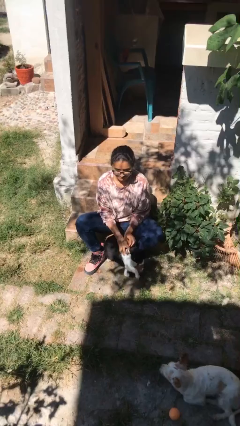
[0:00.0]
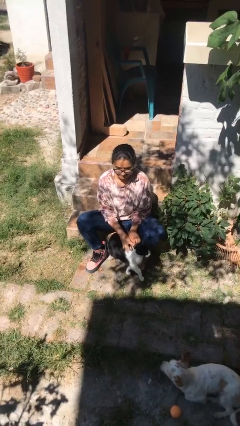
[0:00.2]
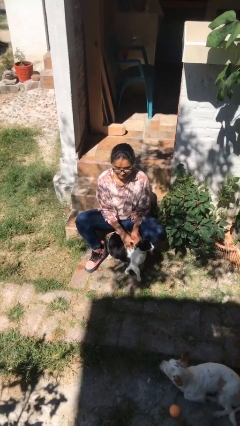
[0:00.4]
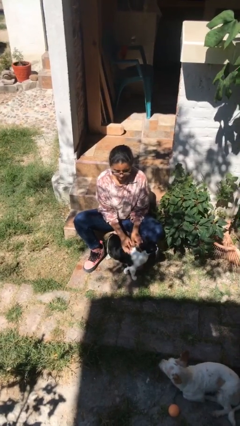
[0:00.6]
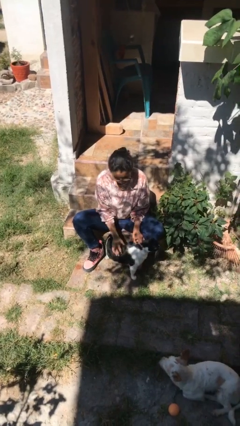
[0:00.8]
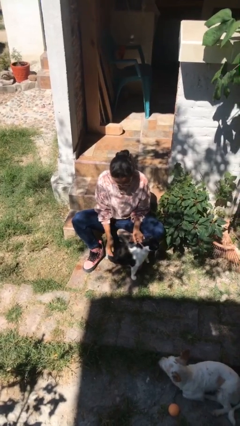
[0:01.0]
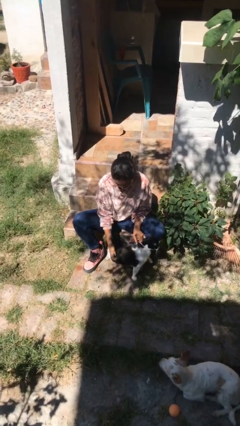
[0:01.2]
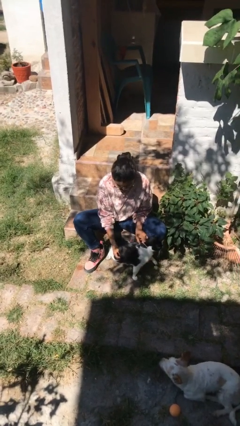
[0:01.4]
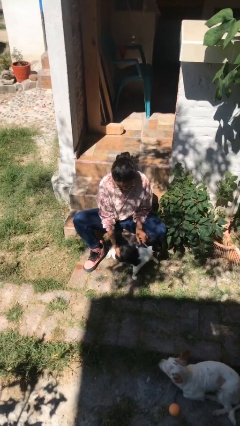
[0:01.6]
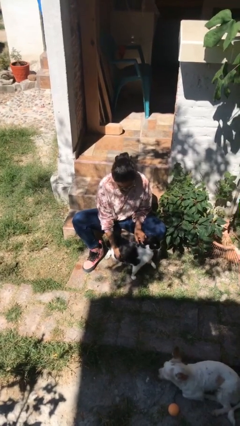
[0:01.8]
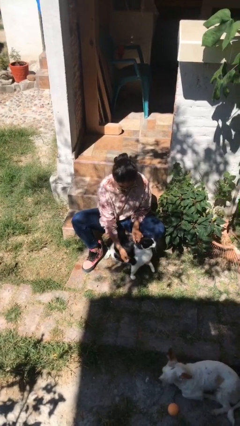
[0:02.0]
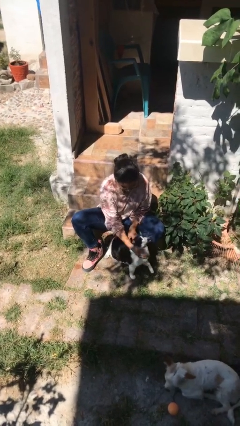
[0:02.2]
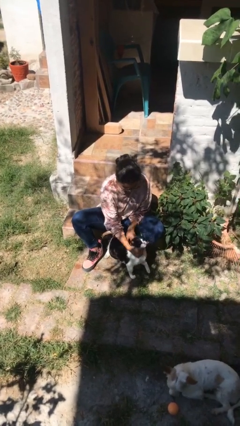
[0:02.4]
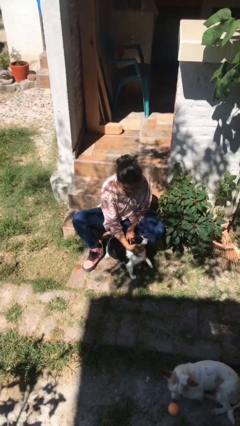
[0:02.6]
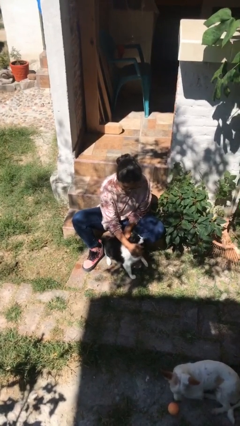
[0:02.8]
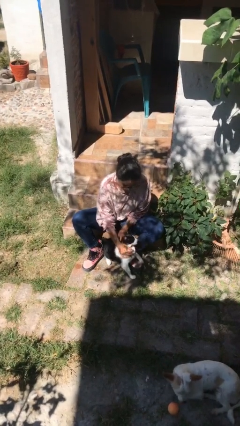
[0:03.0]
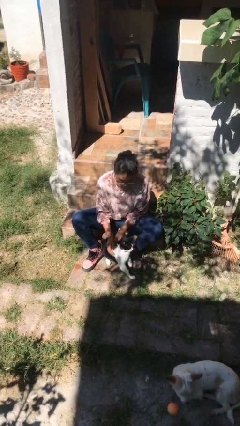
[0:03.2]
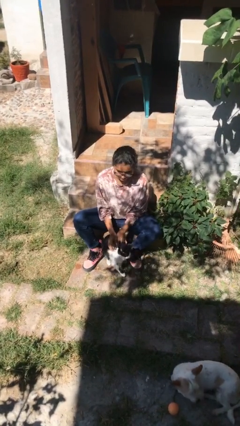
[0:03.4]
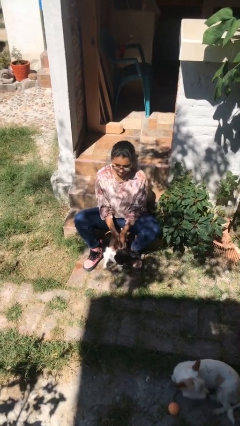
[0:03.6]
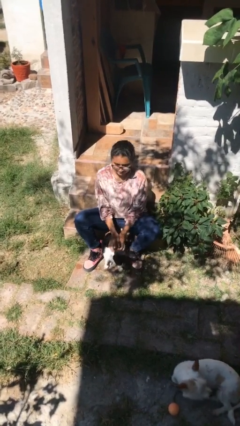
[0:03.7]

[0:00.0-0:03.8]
person pets cat

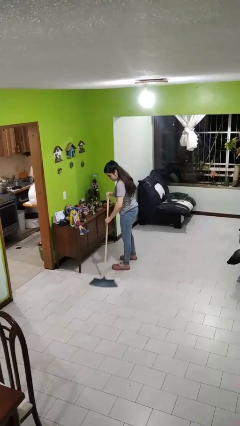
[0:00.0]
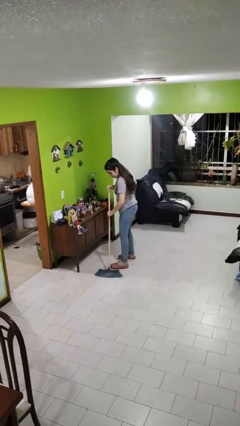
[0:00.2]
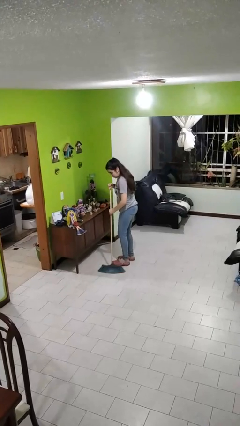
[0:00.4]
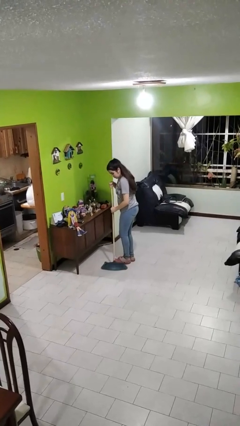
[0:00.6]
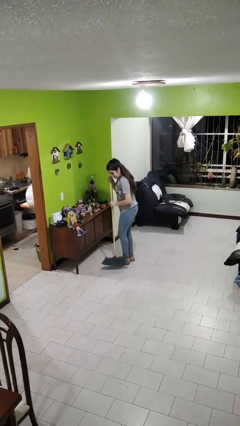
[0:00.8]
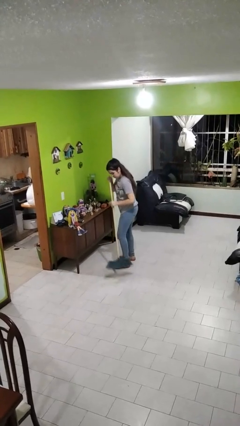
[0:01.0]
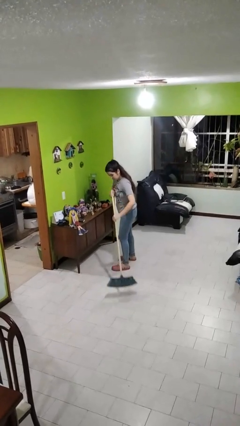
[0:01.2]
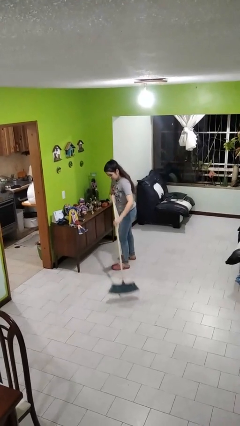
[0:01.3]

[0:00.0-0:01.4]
person sweeps floor

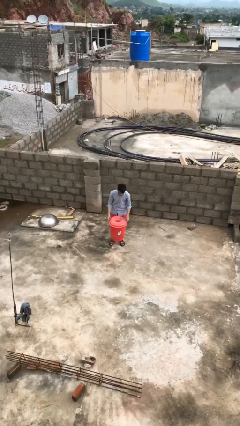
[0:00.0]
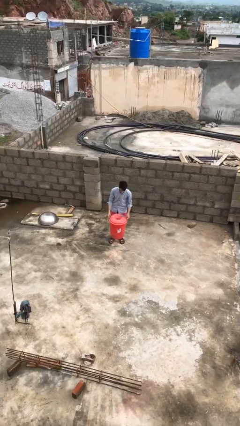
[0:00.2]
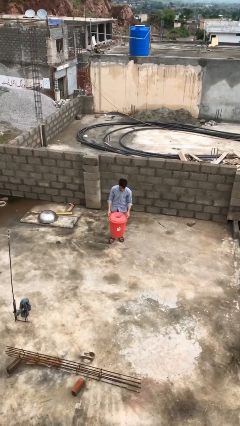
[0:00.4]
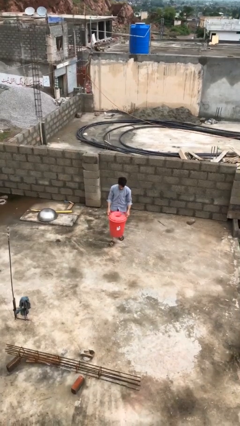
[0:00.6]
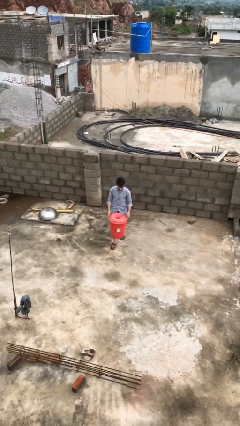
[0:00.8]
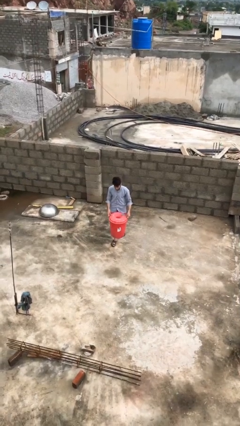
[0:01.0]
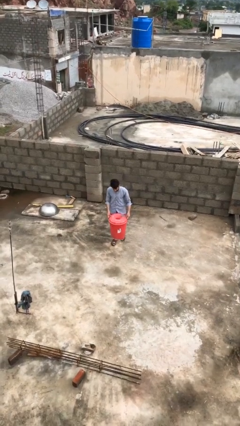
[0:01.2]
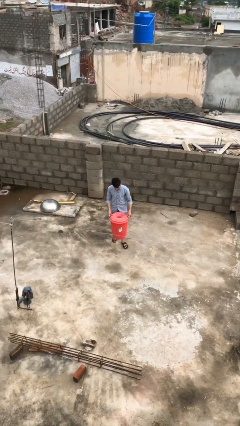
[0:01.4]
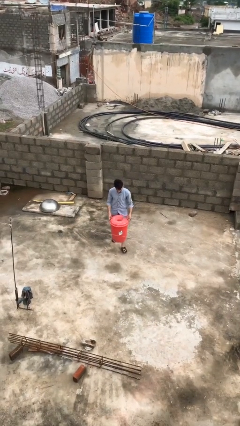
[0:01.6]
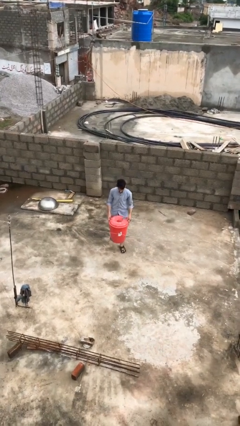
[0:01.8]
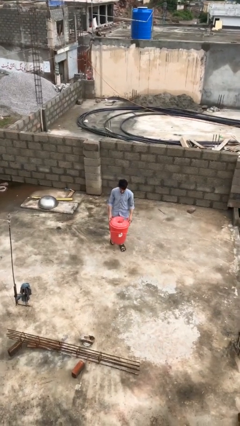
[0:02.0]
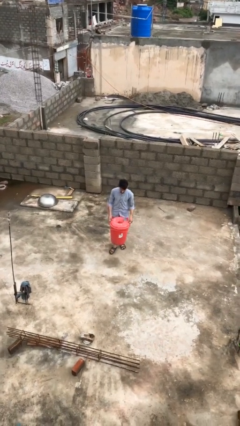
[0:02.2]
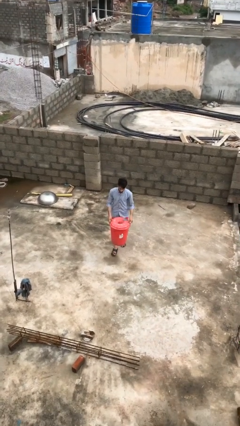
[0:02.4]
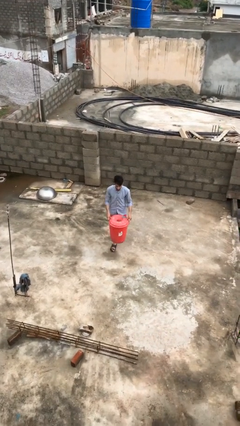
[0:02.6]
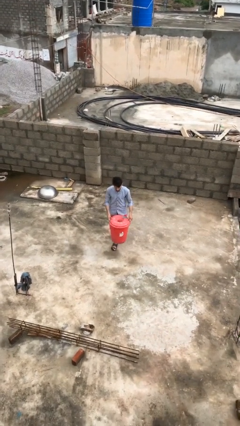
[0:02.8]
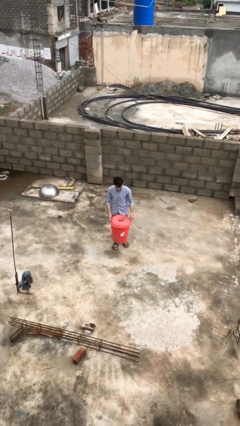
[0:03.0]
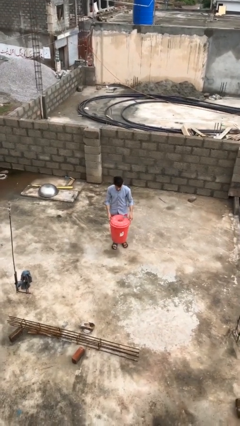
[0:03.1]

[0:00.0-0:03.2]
person carries heavy object

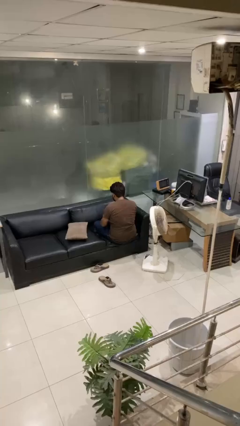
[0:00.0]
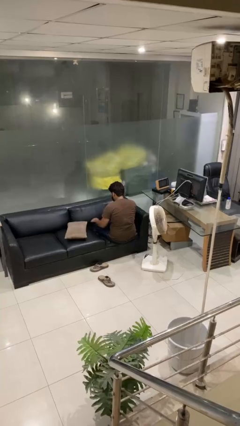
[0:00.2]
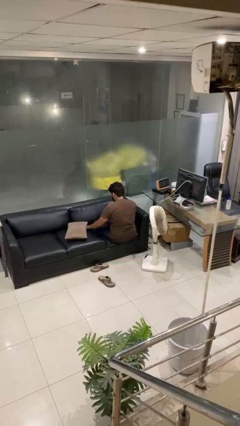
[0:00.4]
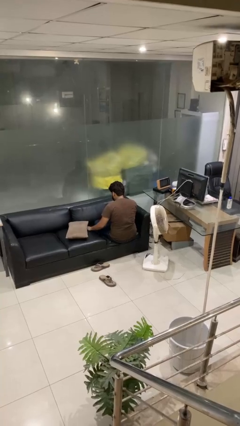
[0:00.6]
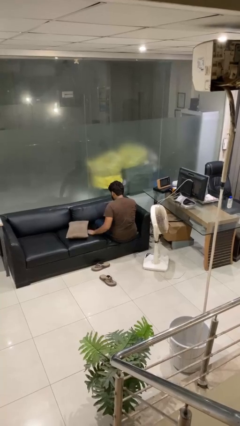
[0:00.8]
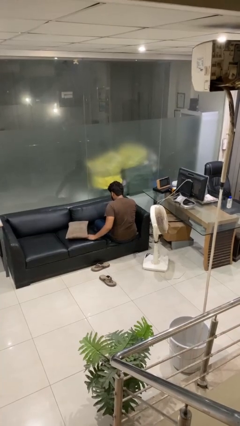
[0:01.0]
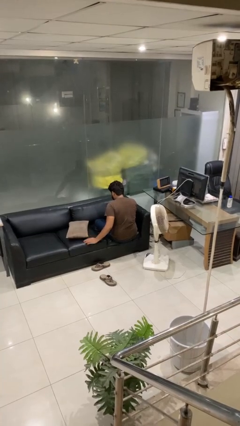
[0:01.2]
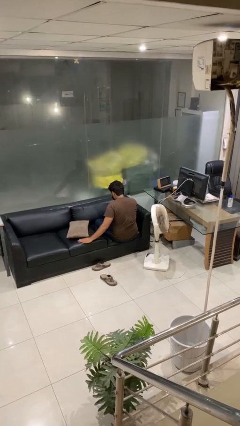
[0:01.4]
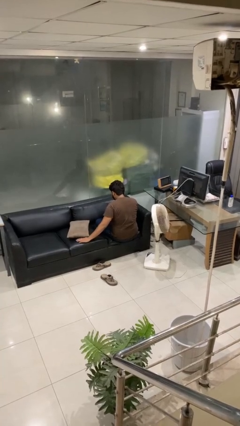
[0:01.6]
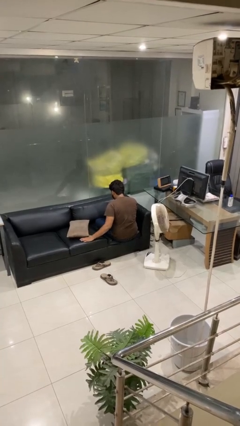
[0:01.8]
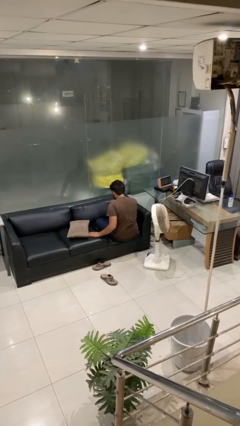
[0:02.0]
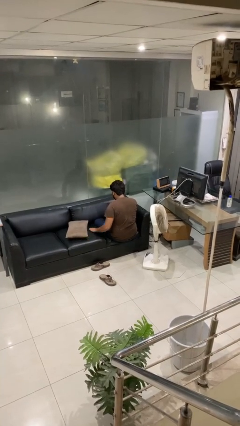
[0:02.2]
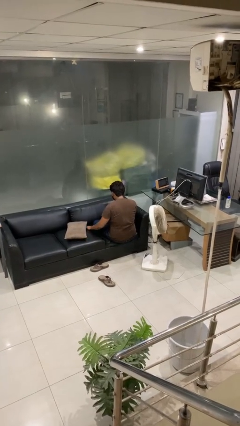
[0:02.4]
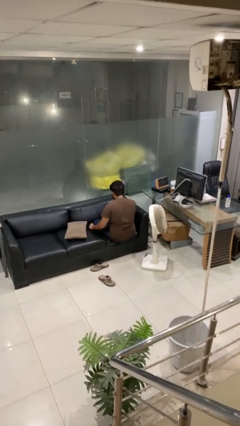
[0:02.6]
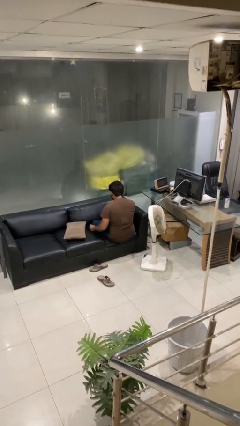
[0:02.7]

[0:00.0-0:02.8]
person searches in couch

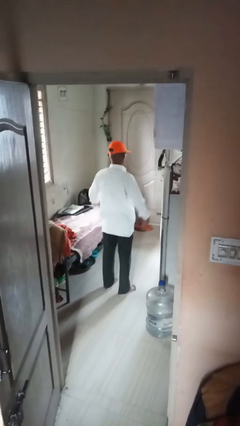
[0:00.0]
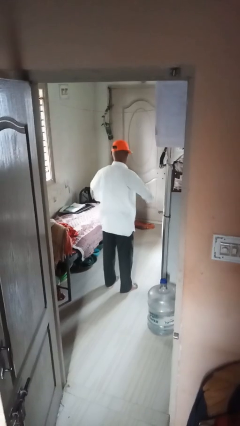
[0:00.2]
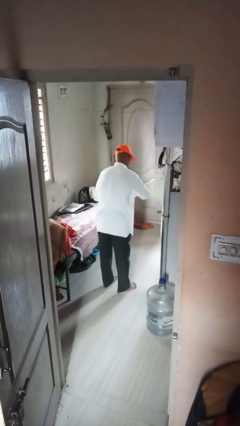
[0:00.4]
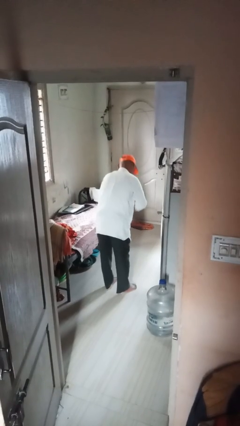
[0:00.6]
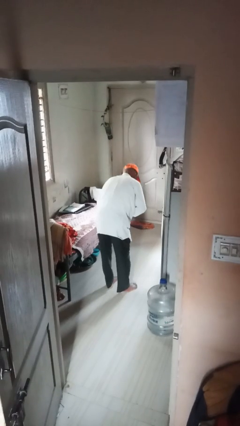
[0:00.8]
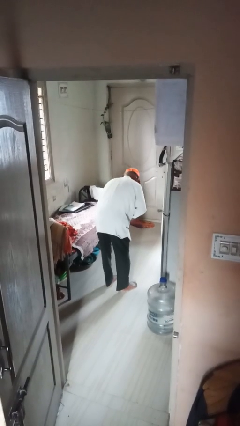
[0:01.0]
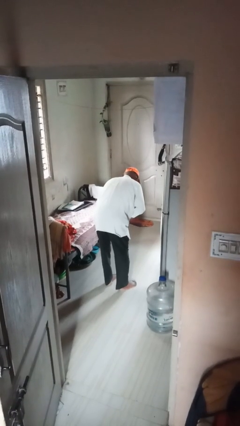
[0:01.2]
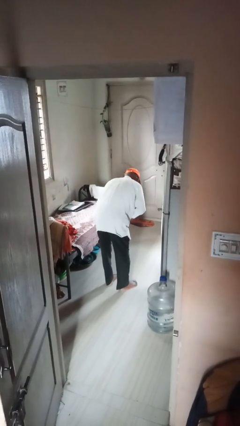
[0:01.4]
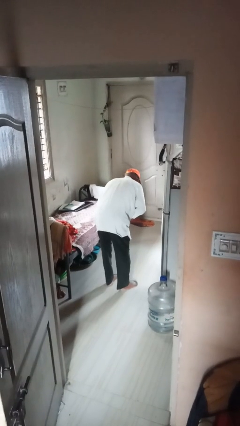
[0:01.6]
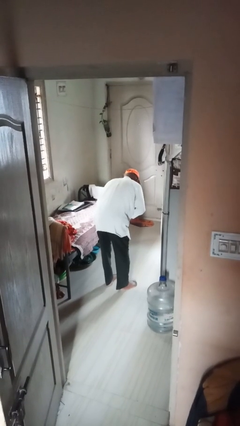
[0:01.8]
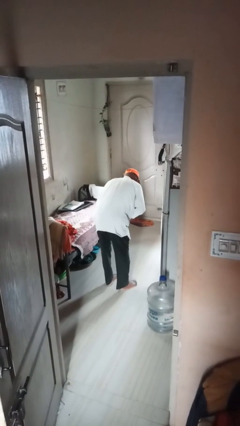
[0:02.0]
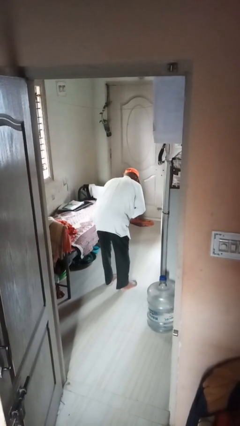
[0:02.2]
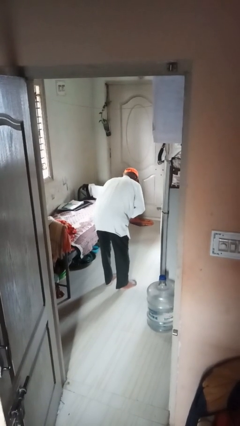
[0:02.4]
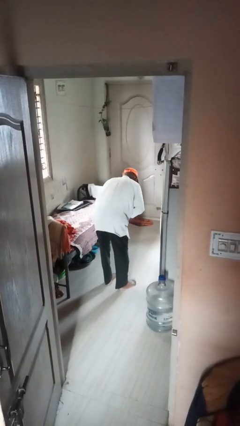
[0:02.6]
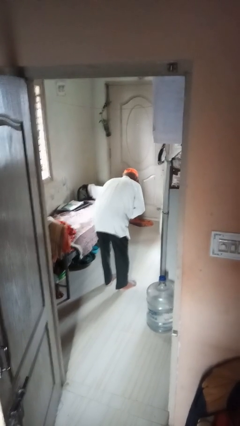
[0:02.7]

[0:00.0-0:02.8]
person bows

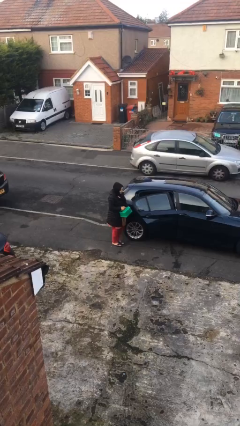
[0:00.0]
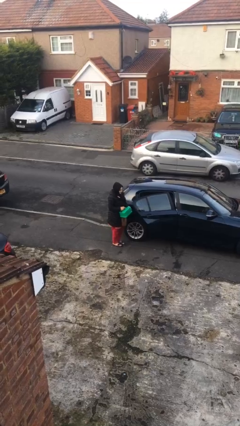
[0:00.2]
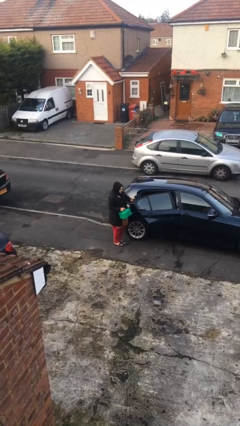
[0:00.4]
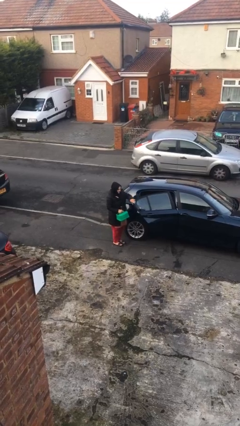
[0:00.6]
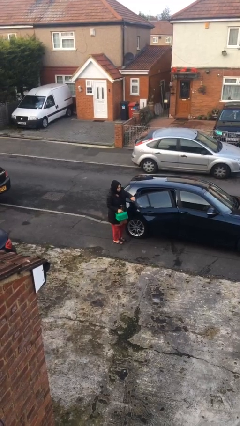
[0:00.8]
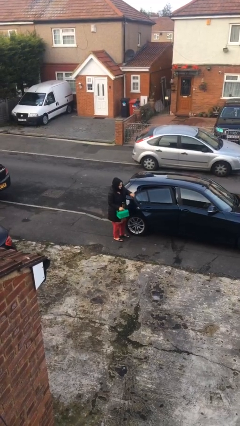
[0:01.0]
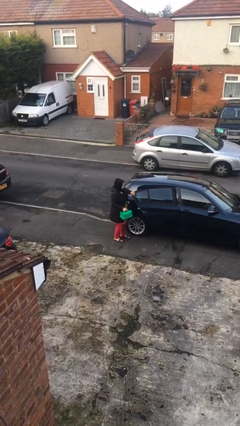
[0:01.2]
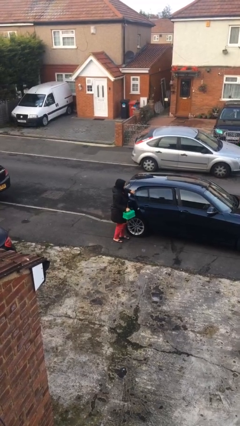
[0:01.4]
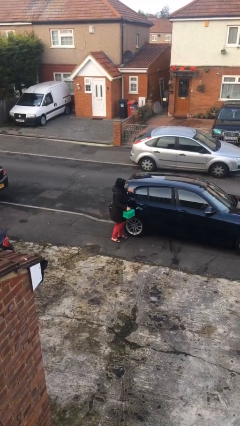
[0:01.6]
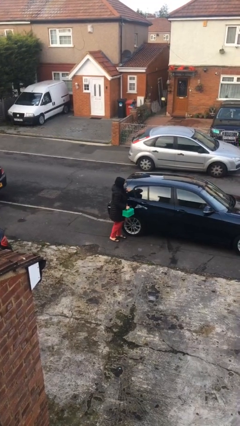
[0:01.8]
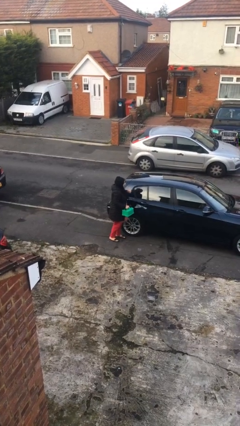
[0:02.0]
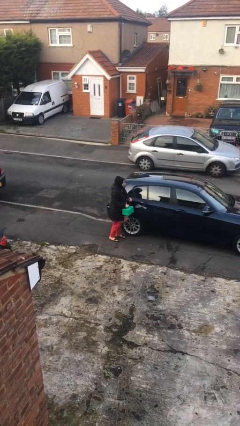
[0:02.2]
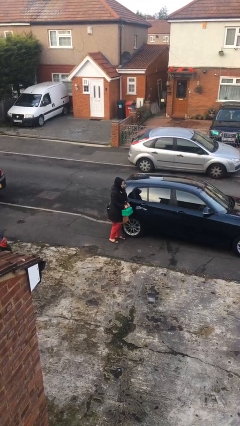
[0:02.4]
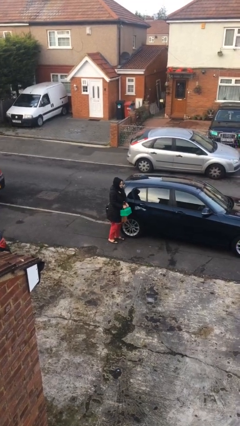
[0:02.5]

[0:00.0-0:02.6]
person closes car door

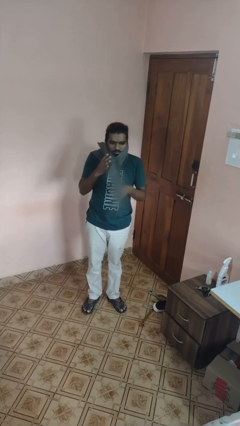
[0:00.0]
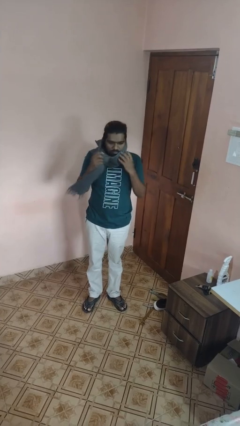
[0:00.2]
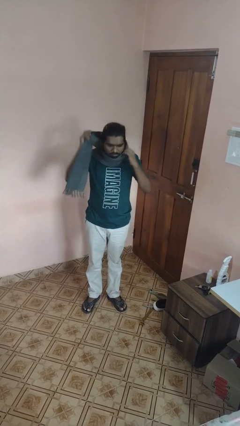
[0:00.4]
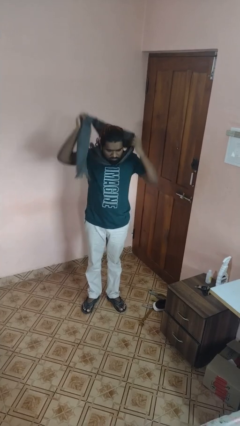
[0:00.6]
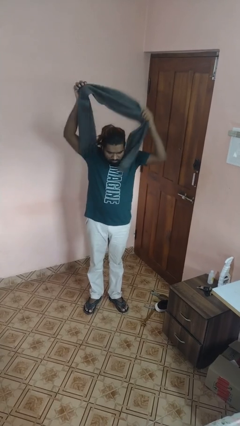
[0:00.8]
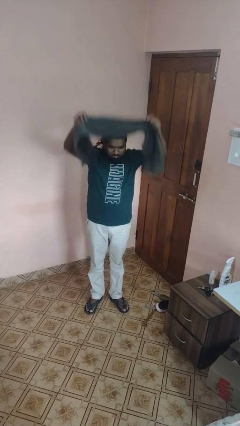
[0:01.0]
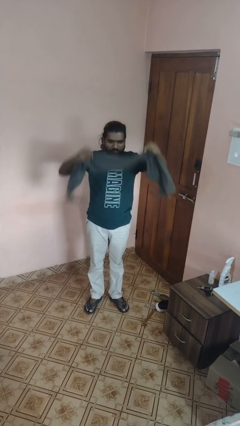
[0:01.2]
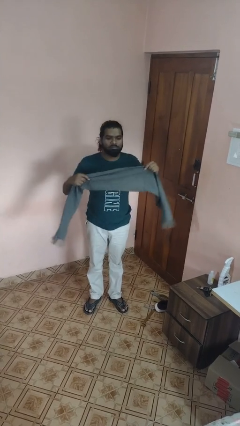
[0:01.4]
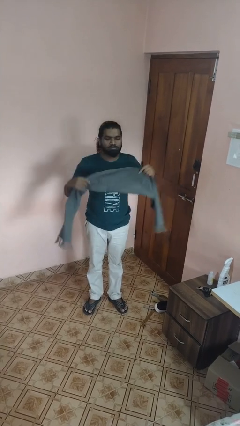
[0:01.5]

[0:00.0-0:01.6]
person takes off scarf
